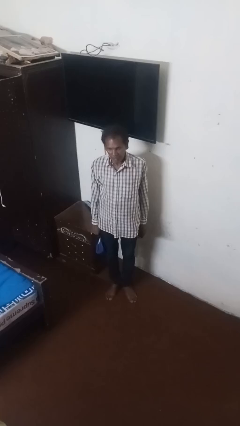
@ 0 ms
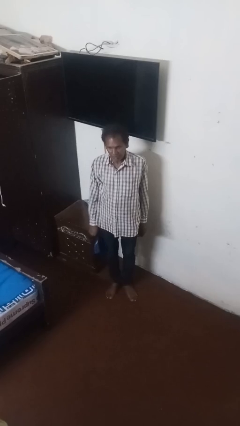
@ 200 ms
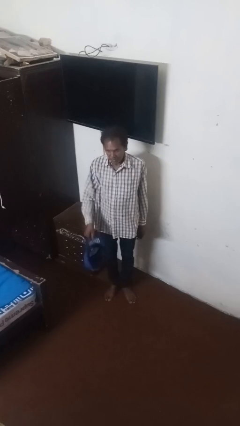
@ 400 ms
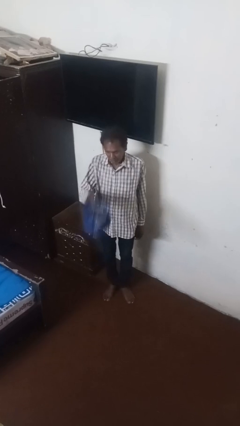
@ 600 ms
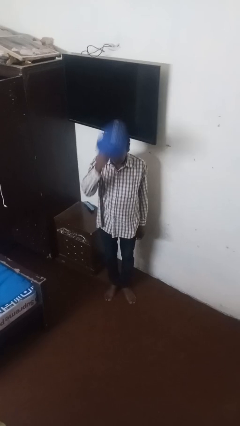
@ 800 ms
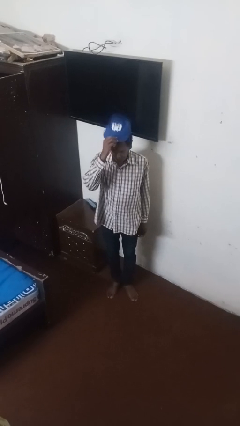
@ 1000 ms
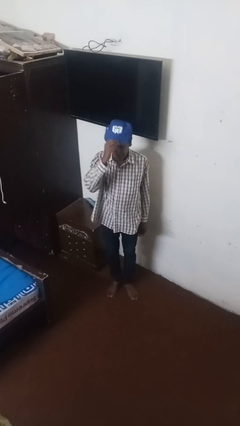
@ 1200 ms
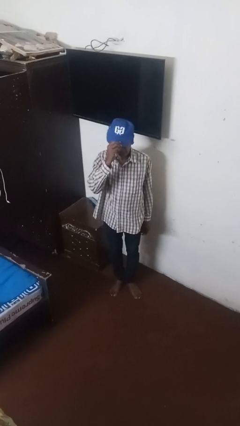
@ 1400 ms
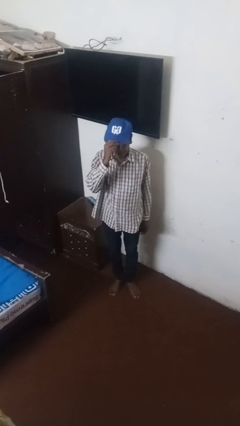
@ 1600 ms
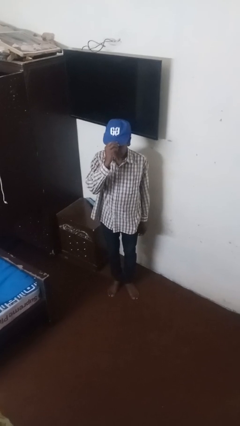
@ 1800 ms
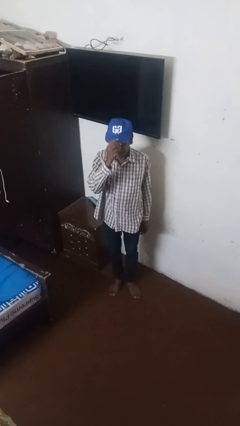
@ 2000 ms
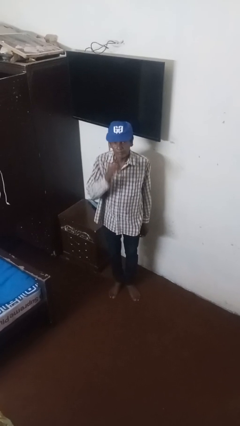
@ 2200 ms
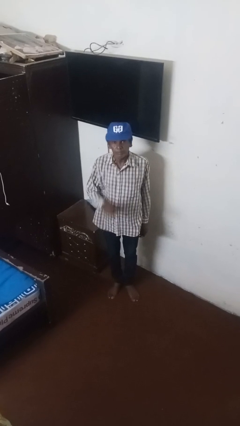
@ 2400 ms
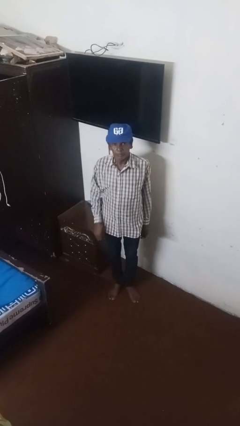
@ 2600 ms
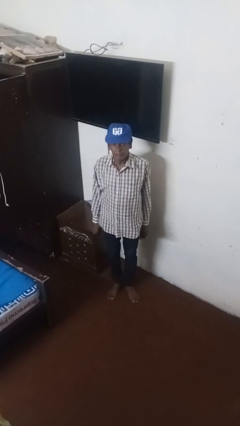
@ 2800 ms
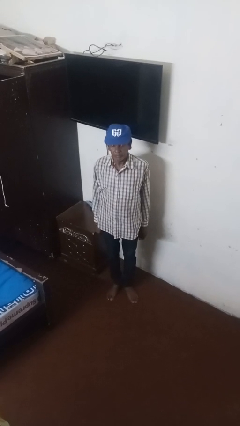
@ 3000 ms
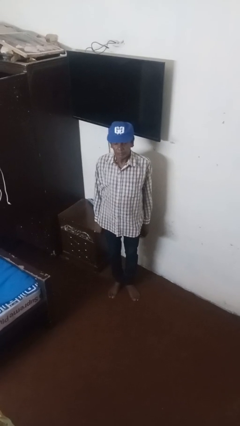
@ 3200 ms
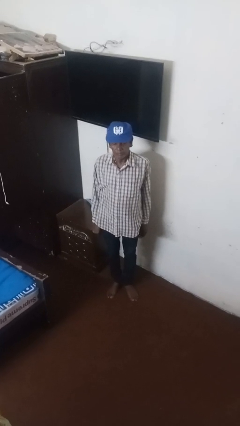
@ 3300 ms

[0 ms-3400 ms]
person puts on hat

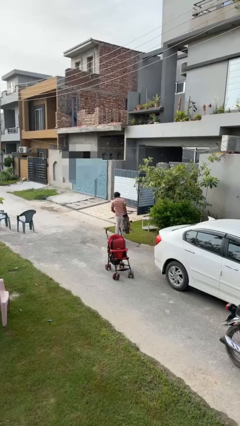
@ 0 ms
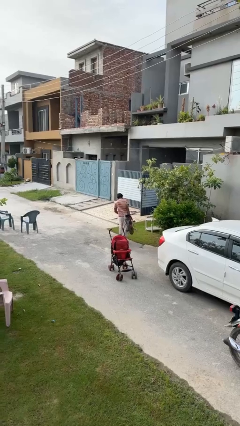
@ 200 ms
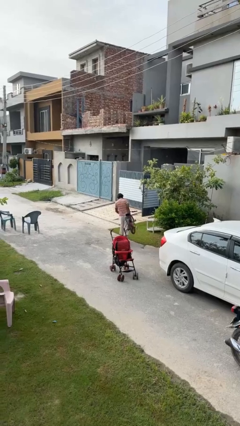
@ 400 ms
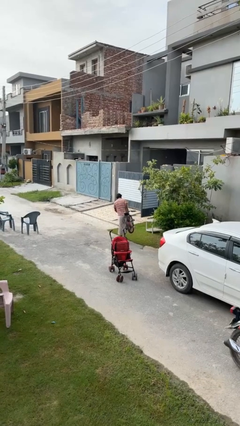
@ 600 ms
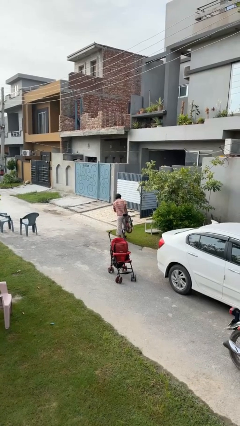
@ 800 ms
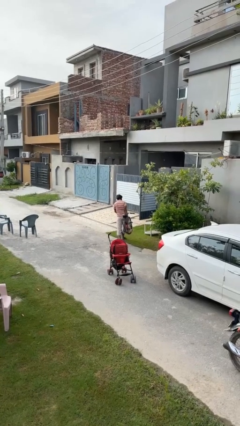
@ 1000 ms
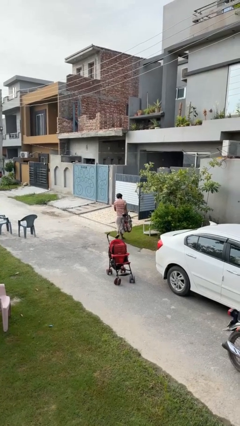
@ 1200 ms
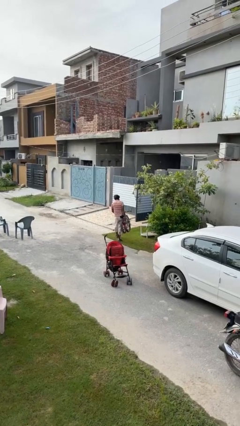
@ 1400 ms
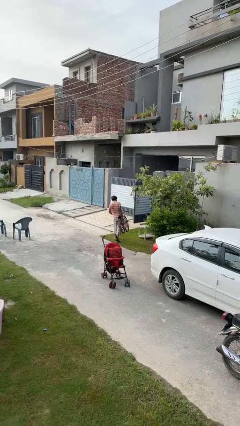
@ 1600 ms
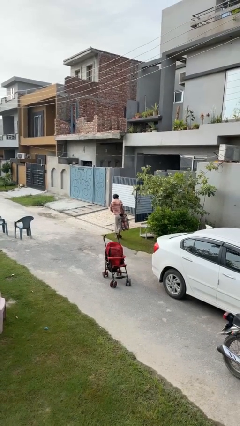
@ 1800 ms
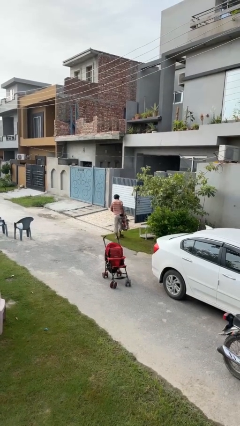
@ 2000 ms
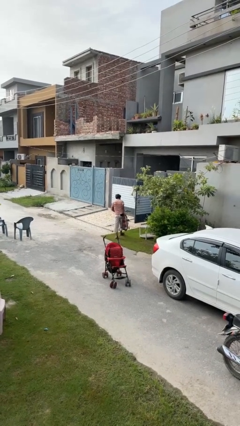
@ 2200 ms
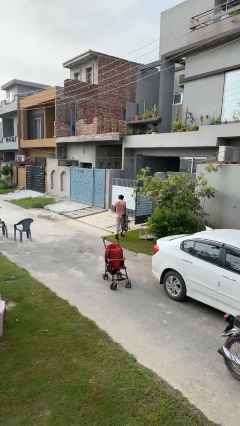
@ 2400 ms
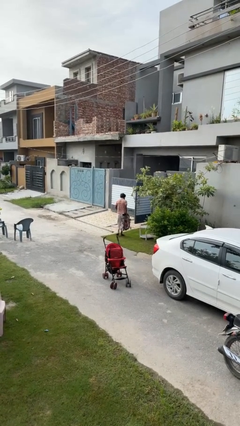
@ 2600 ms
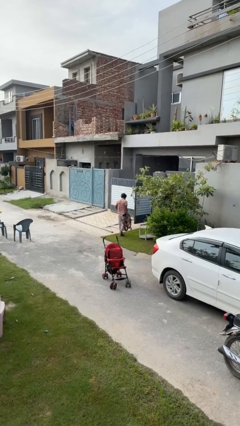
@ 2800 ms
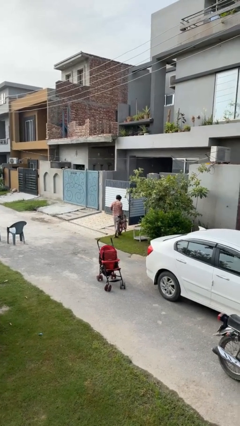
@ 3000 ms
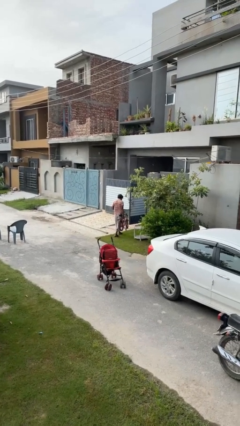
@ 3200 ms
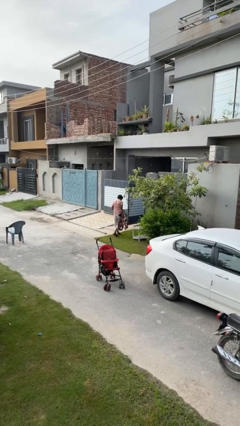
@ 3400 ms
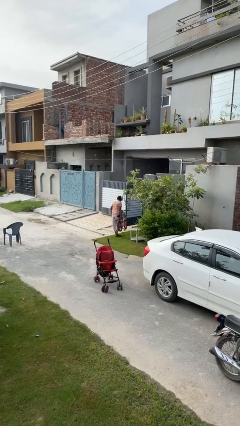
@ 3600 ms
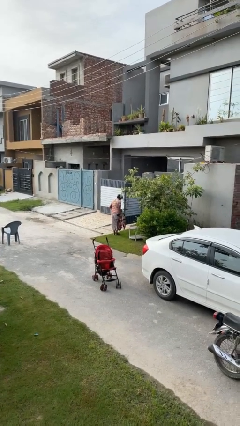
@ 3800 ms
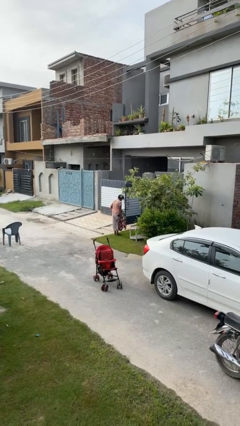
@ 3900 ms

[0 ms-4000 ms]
person carries bicycle

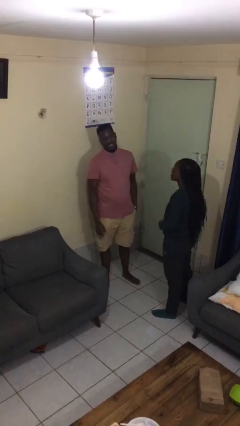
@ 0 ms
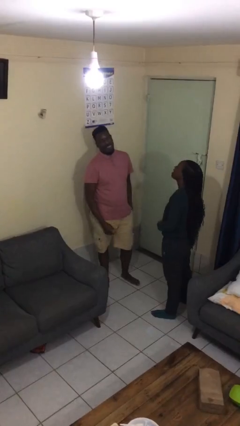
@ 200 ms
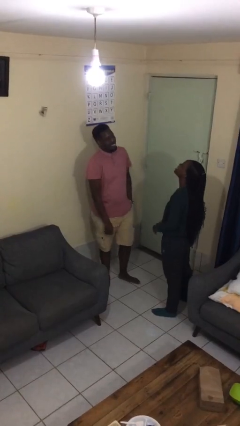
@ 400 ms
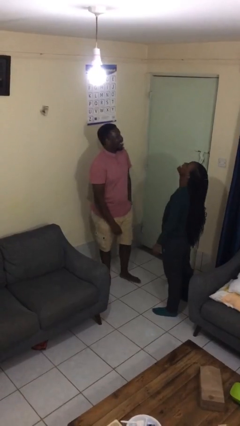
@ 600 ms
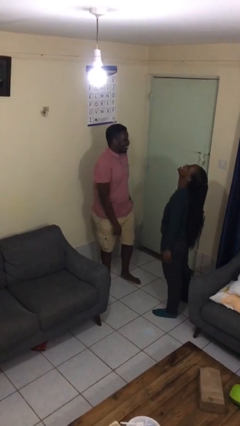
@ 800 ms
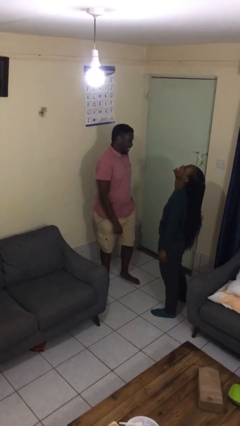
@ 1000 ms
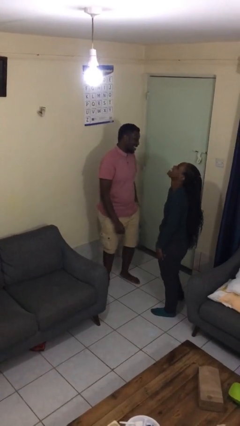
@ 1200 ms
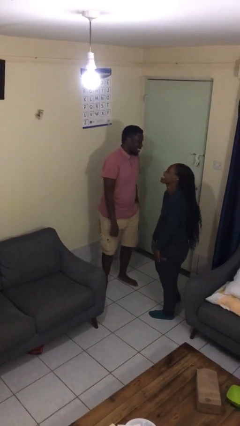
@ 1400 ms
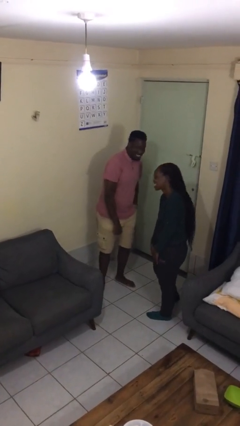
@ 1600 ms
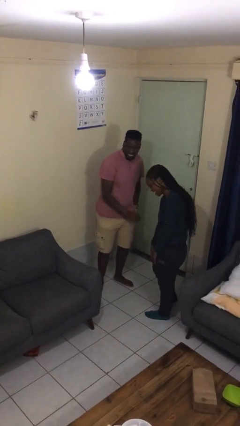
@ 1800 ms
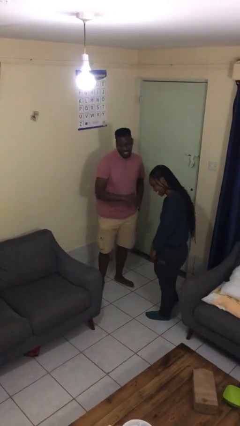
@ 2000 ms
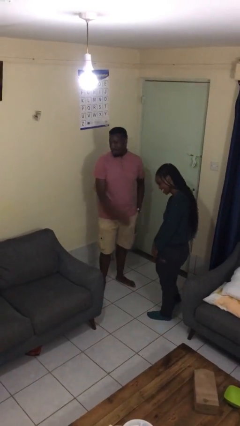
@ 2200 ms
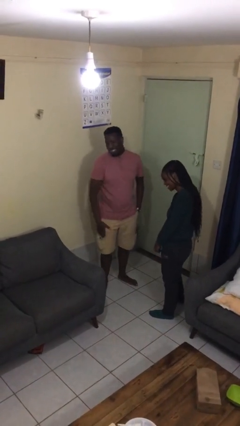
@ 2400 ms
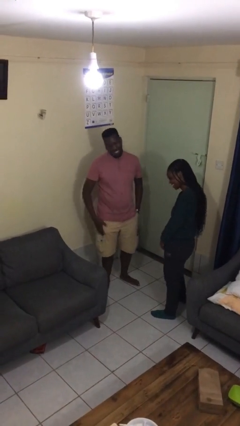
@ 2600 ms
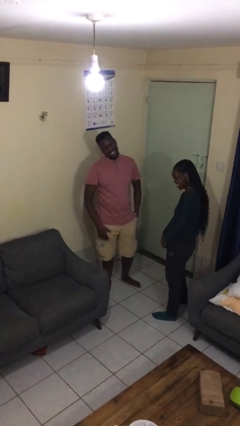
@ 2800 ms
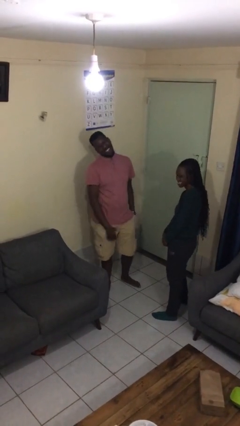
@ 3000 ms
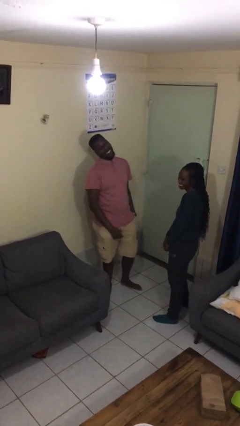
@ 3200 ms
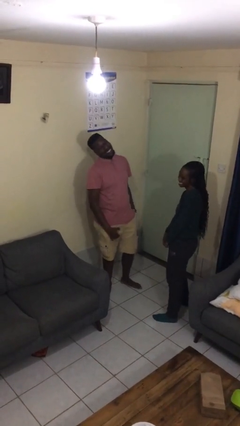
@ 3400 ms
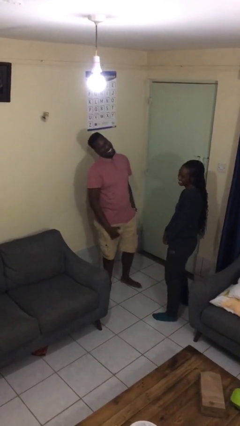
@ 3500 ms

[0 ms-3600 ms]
person laughs with person

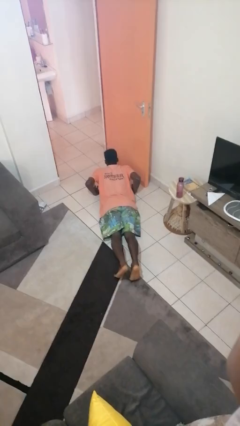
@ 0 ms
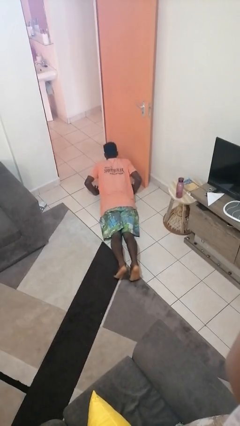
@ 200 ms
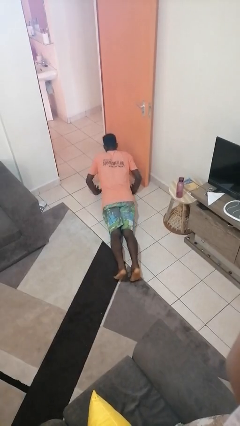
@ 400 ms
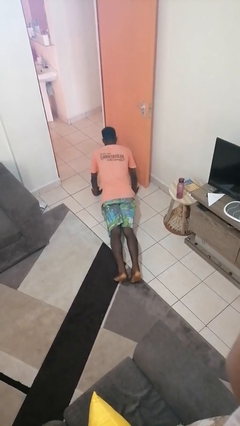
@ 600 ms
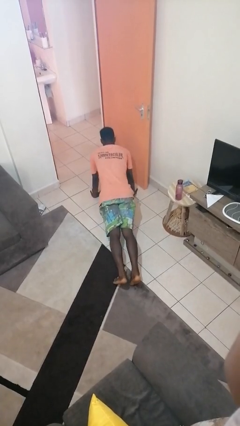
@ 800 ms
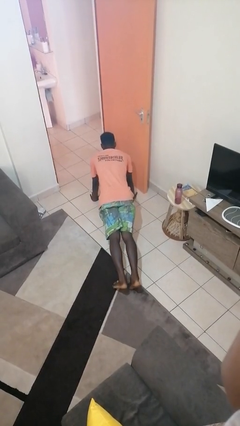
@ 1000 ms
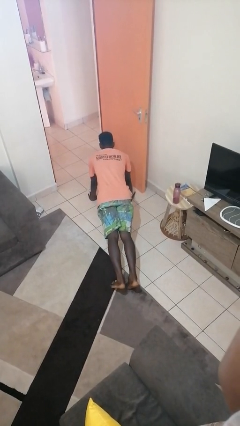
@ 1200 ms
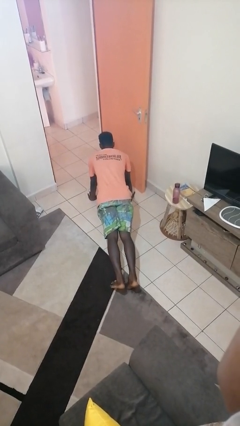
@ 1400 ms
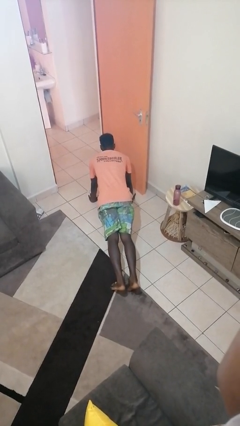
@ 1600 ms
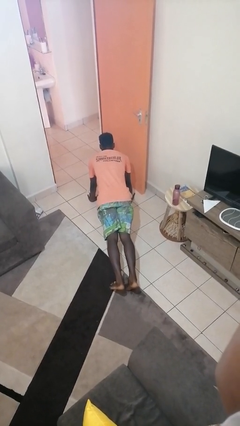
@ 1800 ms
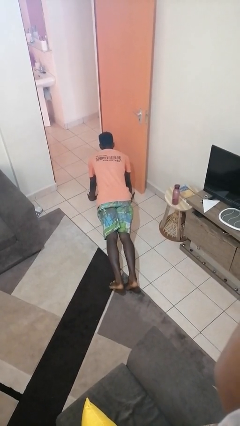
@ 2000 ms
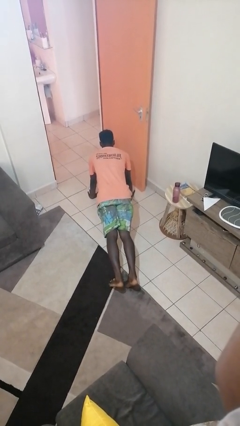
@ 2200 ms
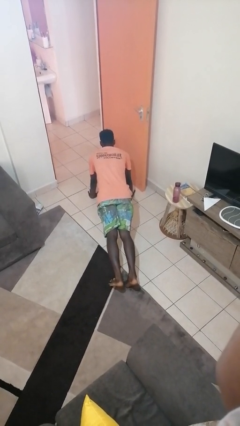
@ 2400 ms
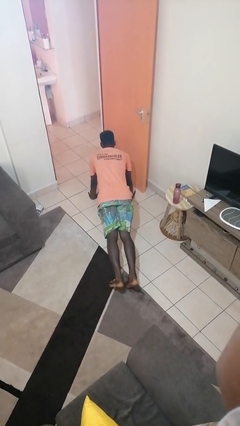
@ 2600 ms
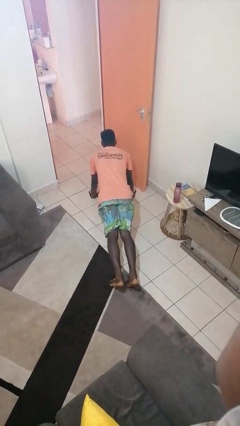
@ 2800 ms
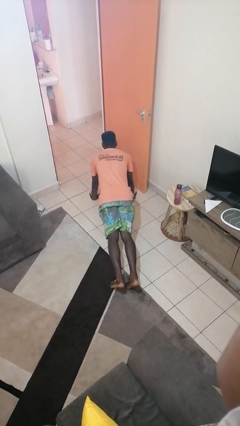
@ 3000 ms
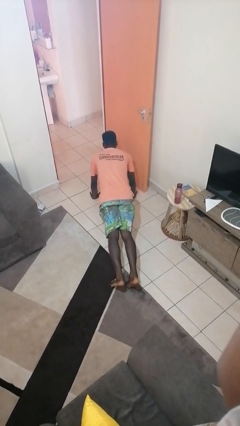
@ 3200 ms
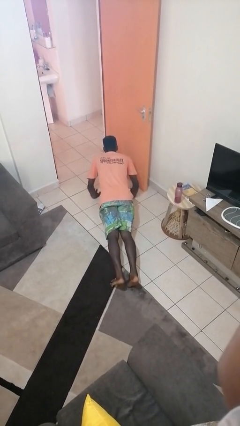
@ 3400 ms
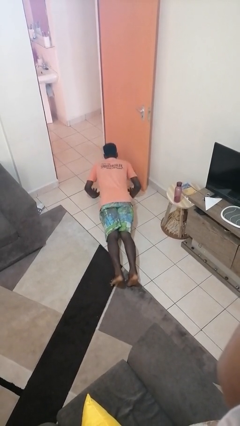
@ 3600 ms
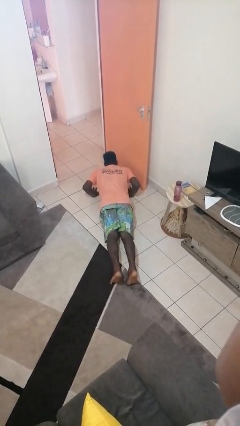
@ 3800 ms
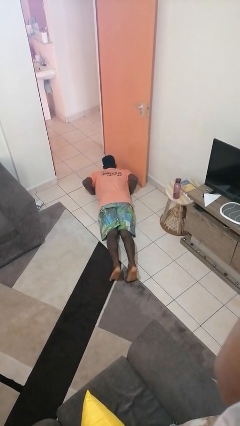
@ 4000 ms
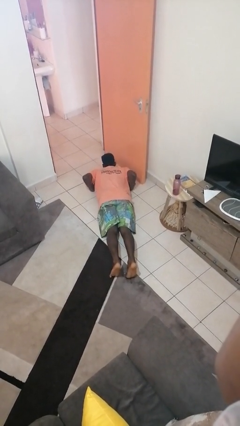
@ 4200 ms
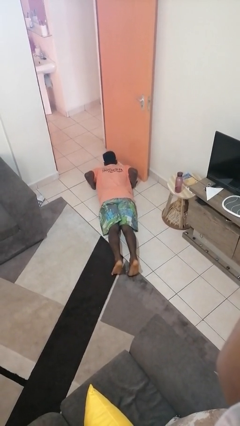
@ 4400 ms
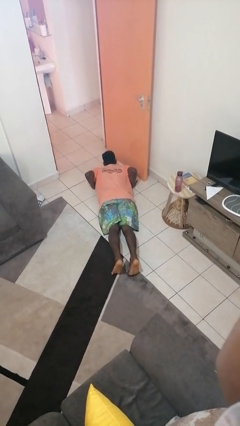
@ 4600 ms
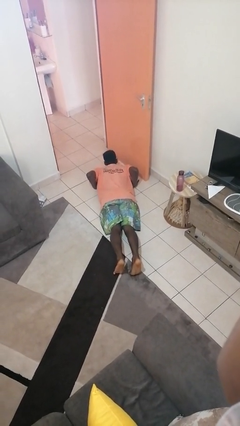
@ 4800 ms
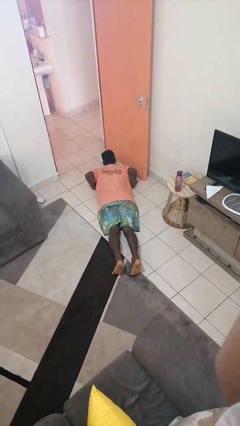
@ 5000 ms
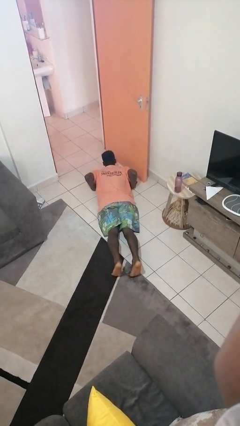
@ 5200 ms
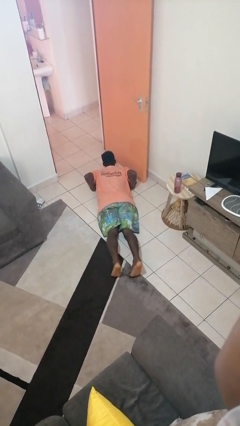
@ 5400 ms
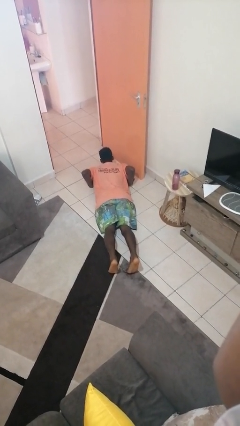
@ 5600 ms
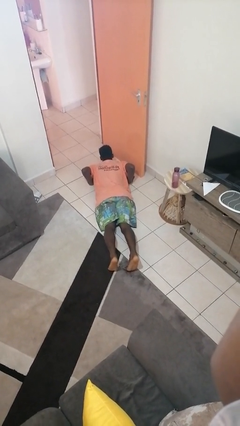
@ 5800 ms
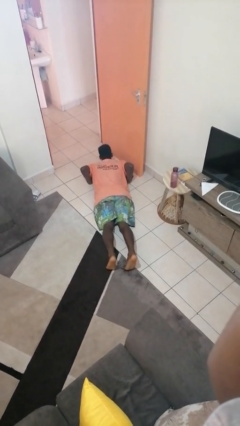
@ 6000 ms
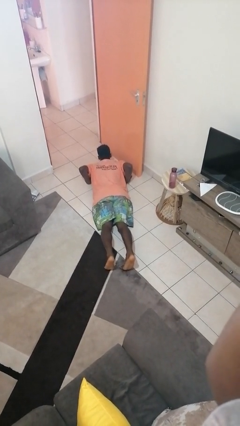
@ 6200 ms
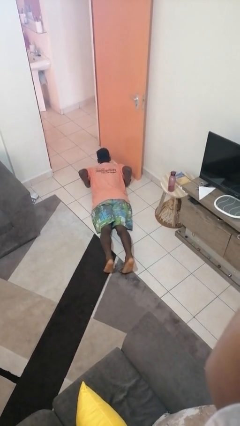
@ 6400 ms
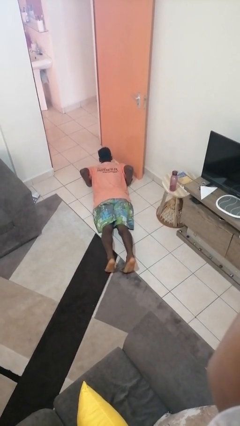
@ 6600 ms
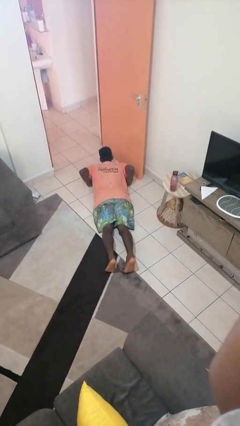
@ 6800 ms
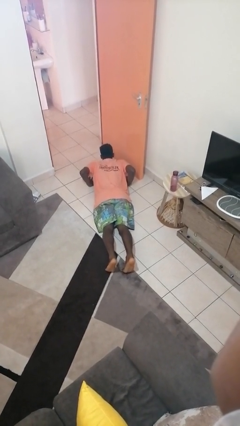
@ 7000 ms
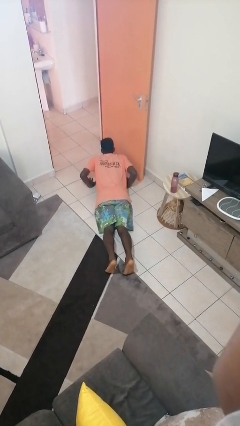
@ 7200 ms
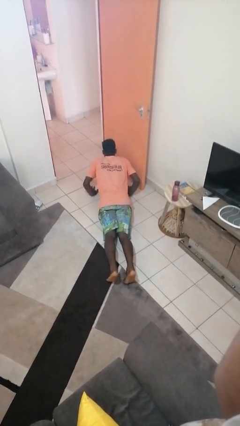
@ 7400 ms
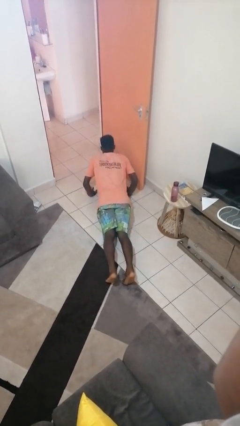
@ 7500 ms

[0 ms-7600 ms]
person exercises with pushup
